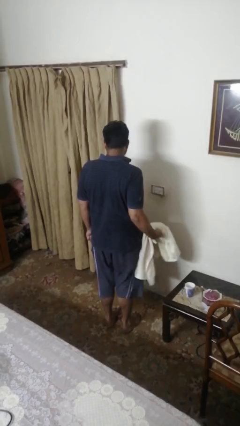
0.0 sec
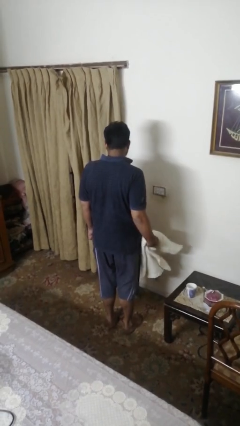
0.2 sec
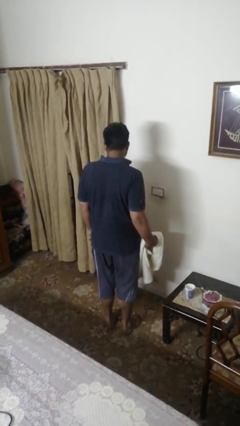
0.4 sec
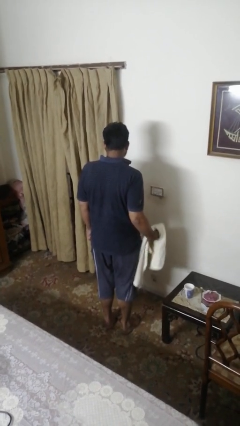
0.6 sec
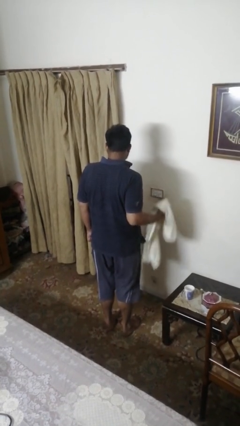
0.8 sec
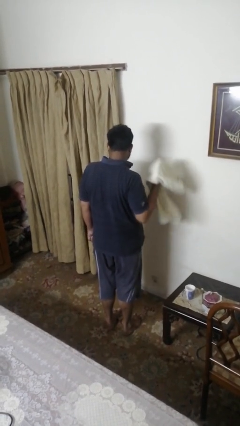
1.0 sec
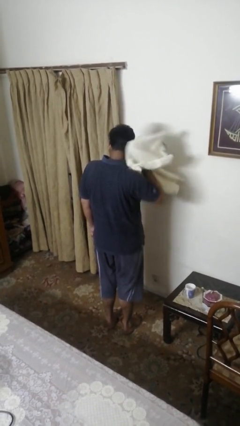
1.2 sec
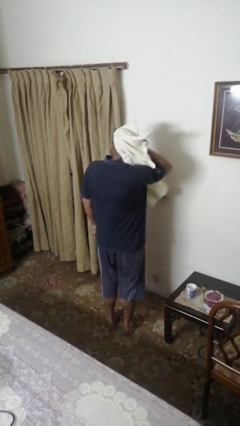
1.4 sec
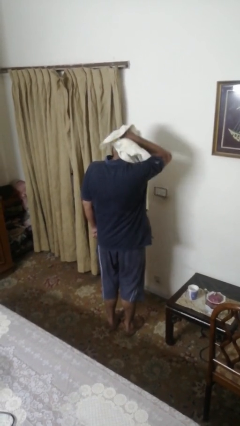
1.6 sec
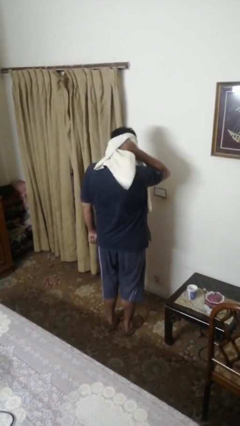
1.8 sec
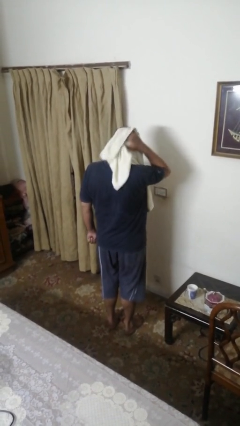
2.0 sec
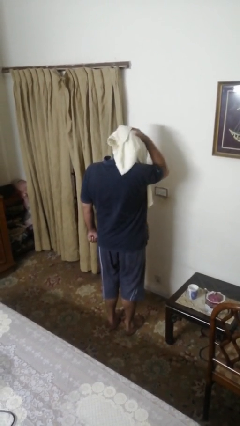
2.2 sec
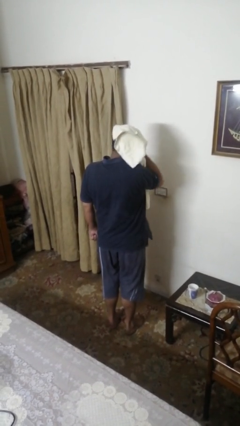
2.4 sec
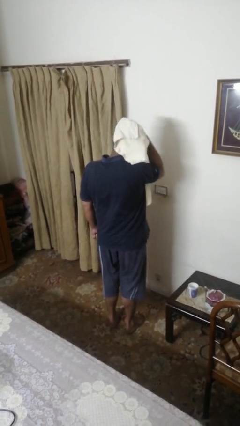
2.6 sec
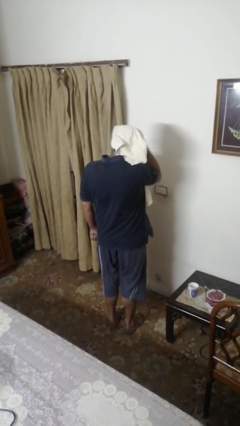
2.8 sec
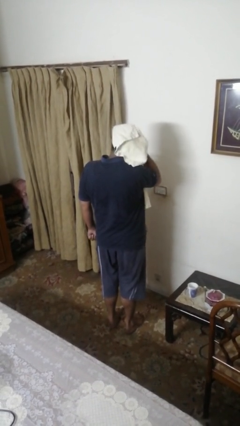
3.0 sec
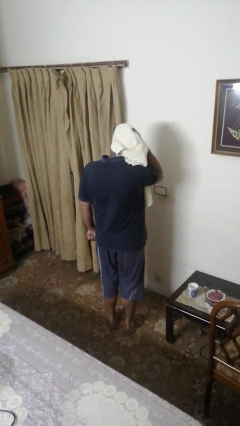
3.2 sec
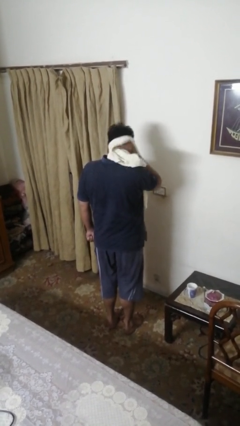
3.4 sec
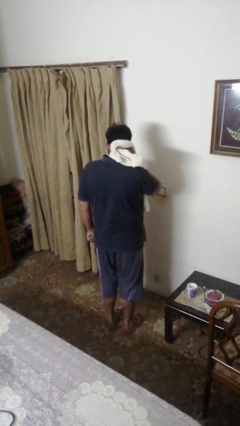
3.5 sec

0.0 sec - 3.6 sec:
person dries hair with towel

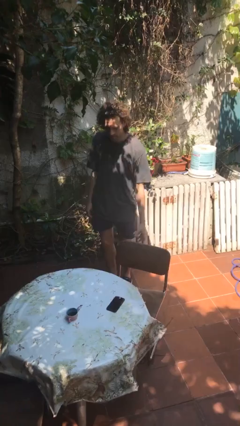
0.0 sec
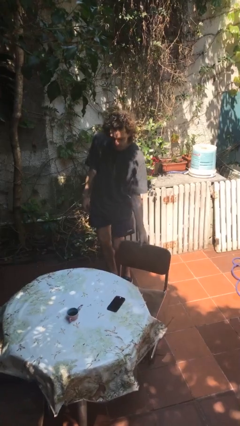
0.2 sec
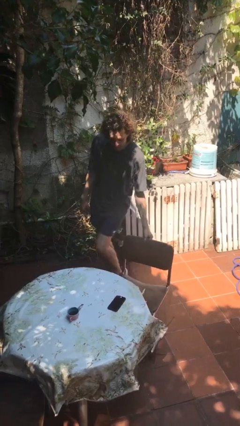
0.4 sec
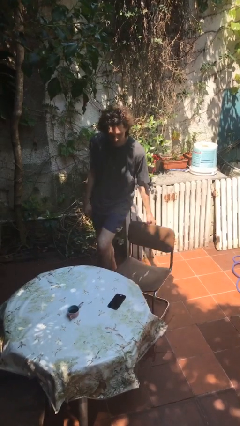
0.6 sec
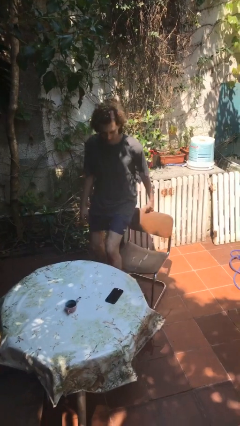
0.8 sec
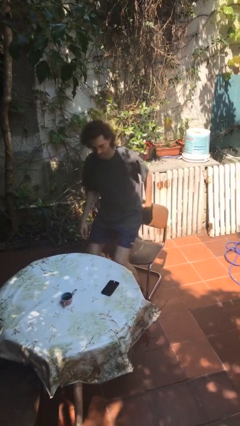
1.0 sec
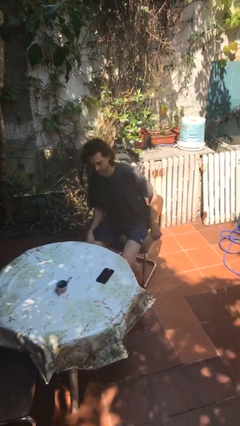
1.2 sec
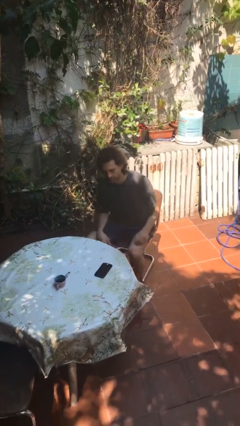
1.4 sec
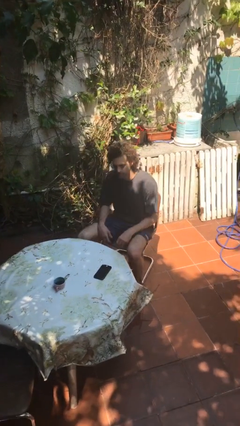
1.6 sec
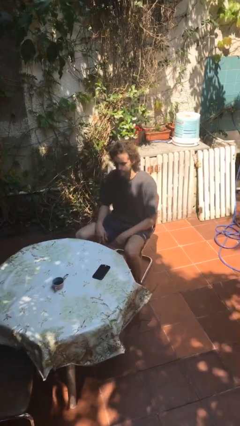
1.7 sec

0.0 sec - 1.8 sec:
person sits down

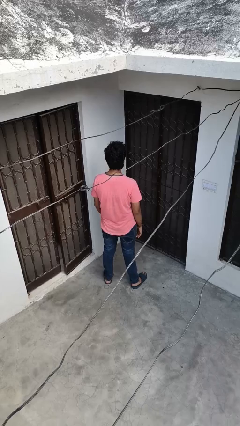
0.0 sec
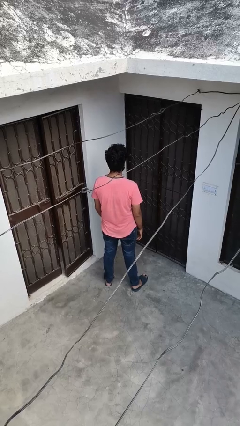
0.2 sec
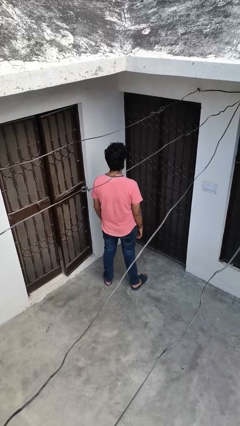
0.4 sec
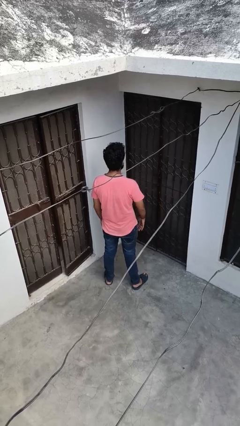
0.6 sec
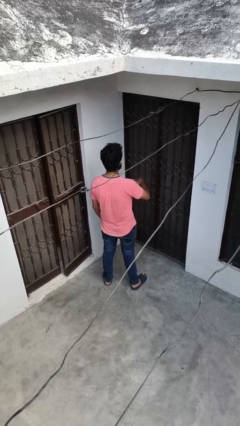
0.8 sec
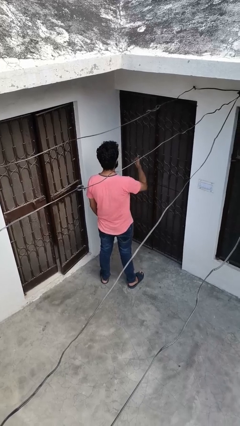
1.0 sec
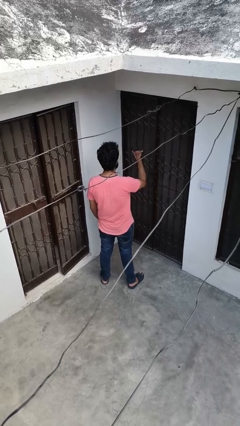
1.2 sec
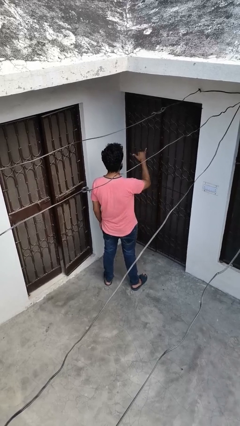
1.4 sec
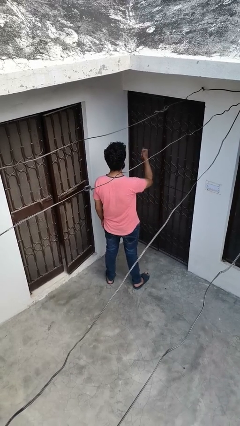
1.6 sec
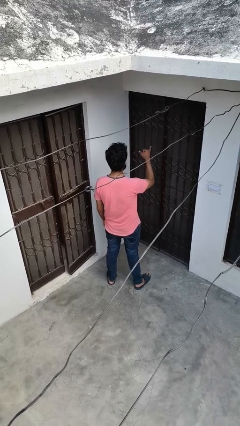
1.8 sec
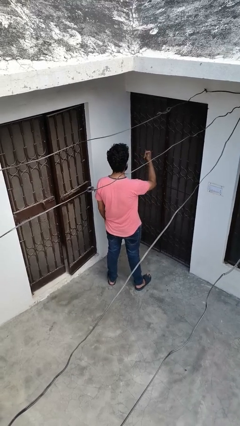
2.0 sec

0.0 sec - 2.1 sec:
person gestures hang loose

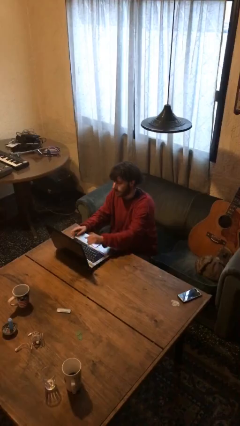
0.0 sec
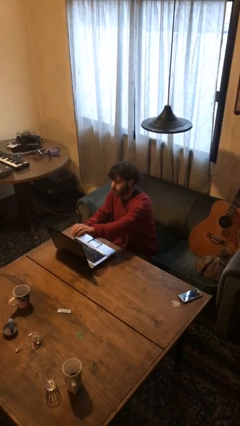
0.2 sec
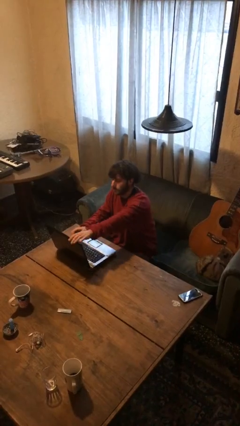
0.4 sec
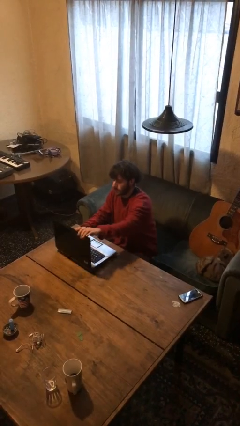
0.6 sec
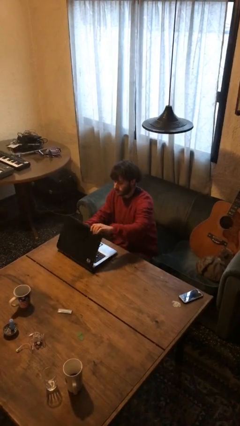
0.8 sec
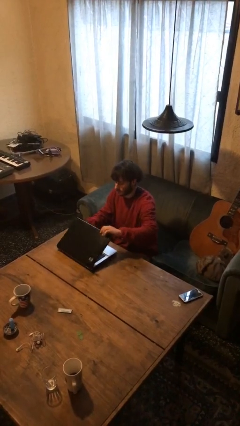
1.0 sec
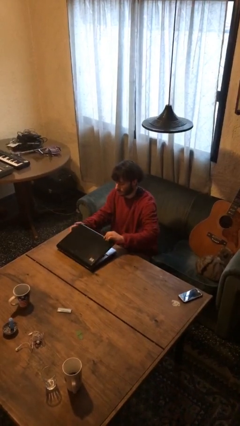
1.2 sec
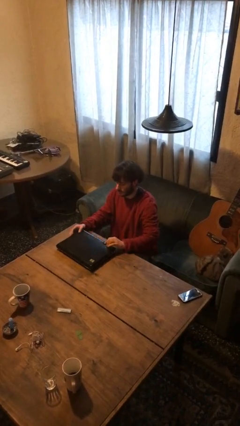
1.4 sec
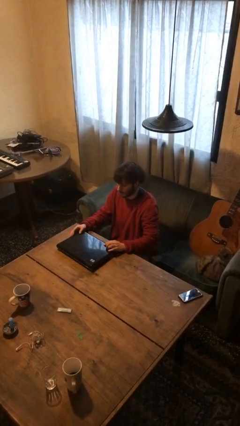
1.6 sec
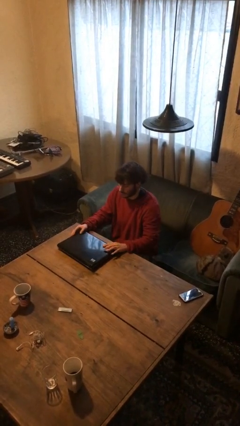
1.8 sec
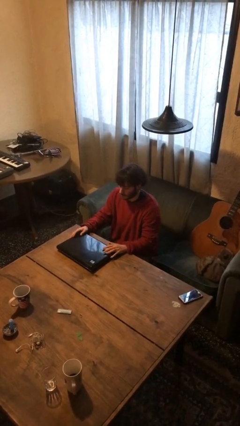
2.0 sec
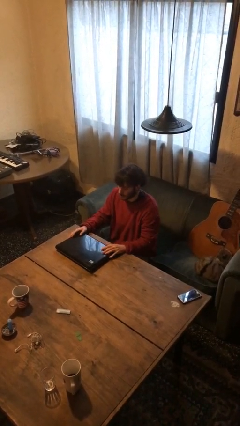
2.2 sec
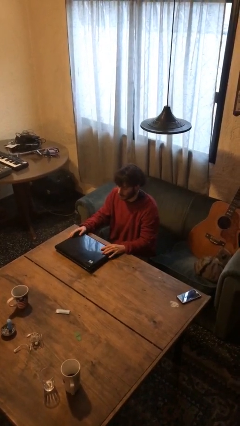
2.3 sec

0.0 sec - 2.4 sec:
person closes laptop

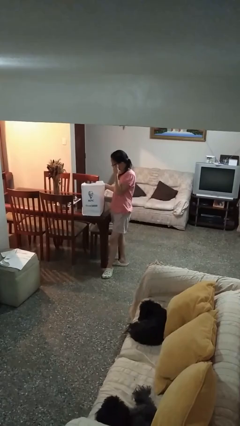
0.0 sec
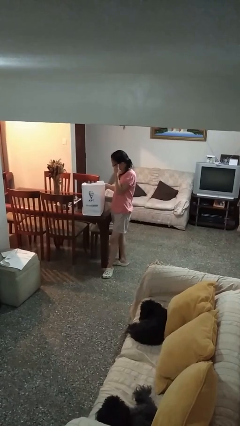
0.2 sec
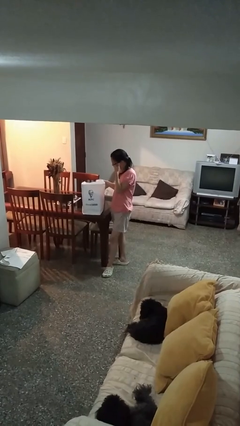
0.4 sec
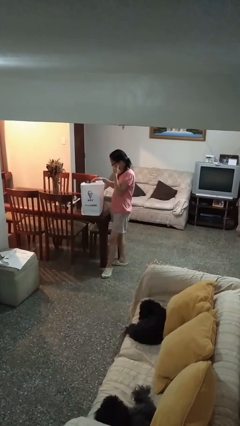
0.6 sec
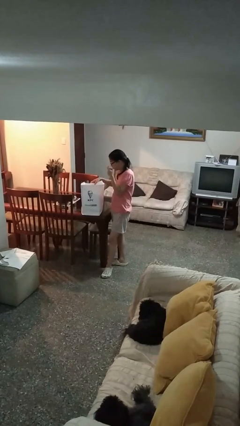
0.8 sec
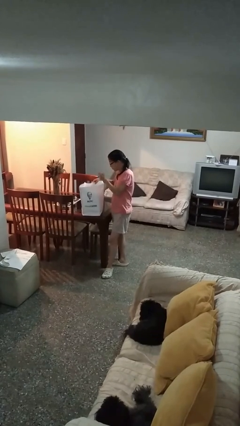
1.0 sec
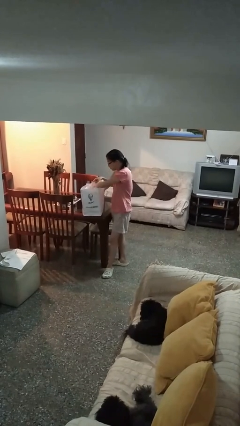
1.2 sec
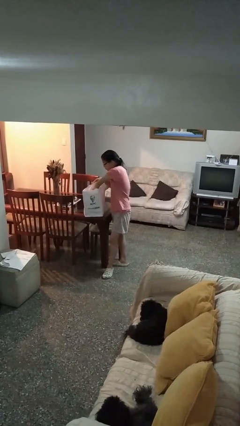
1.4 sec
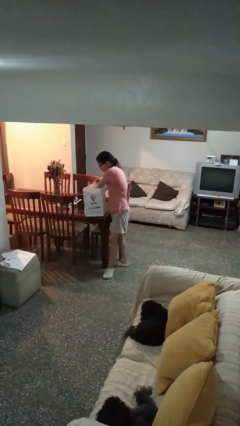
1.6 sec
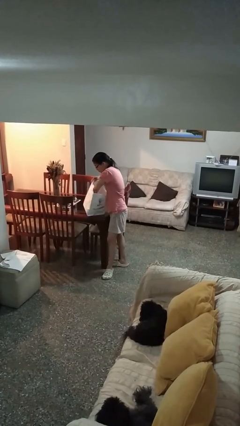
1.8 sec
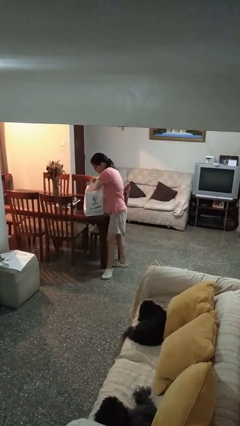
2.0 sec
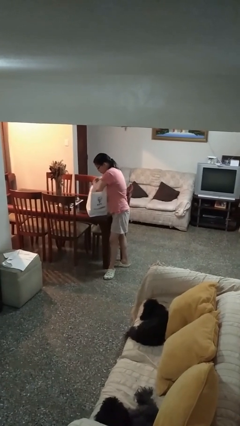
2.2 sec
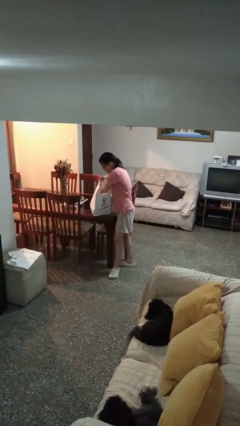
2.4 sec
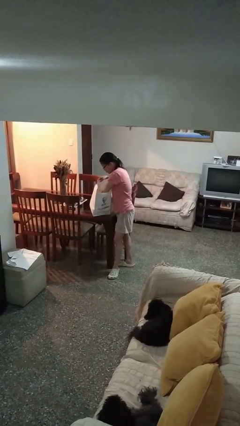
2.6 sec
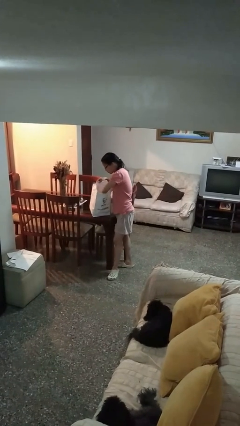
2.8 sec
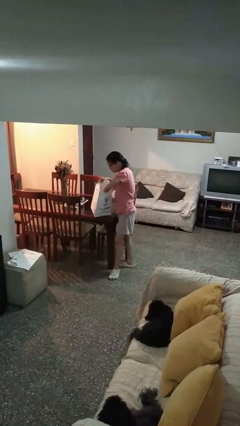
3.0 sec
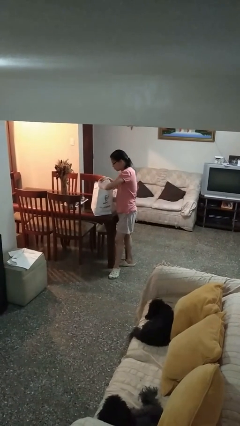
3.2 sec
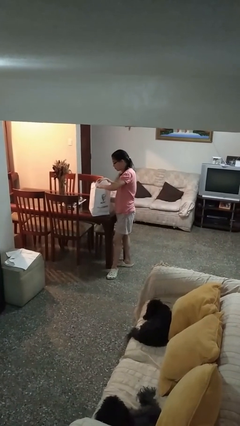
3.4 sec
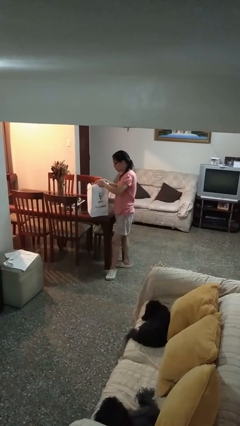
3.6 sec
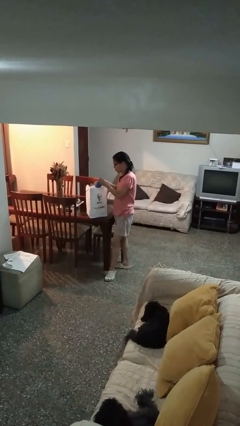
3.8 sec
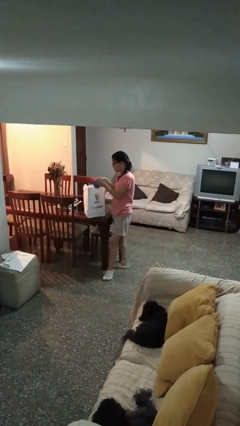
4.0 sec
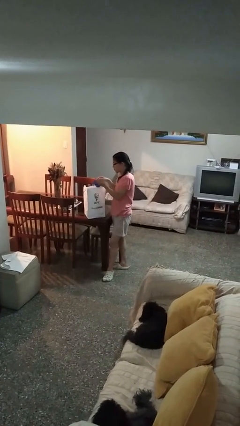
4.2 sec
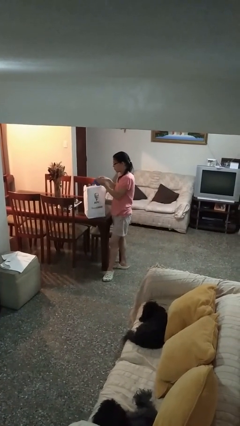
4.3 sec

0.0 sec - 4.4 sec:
person searches in bag

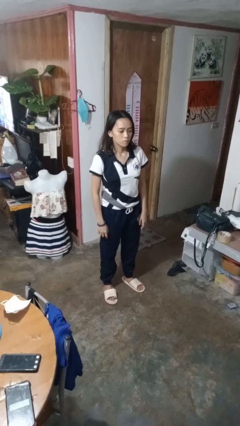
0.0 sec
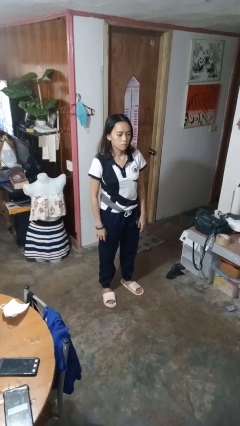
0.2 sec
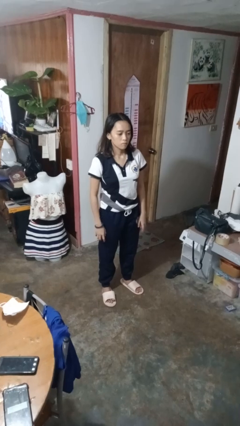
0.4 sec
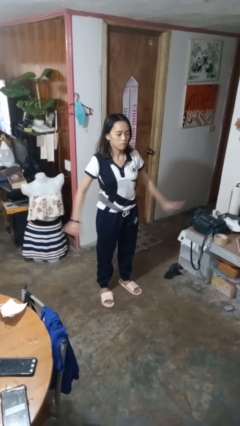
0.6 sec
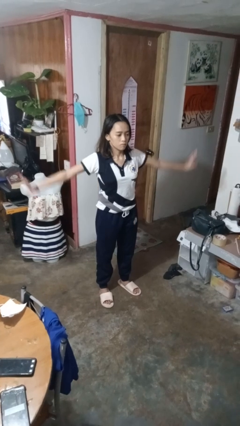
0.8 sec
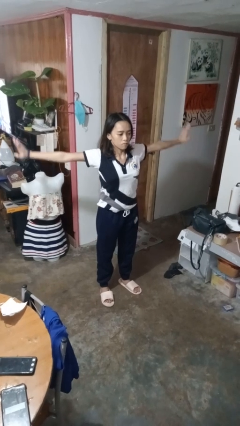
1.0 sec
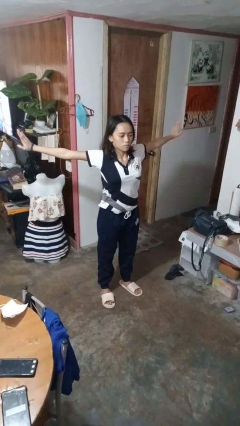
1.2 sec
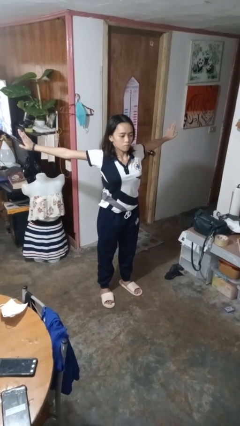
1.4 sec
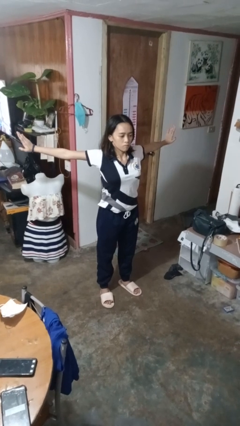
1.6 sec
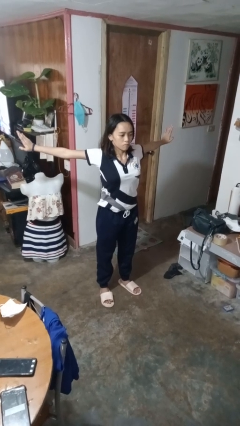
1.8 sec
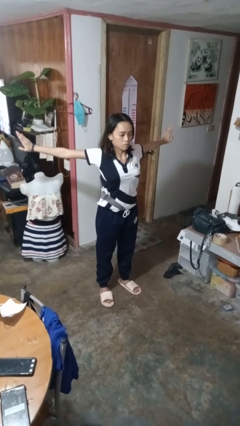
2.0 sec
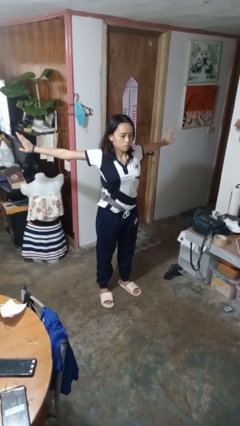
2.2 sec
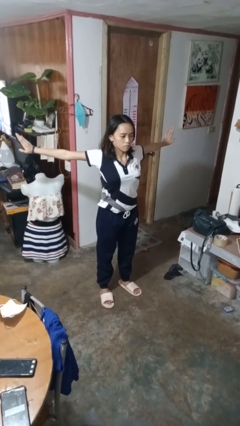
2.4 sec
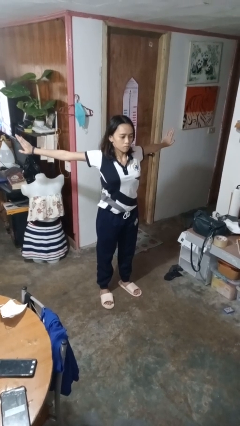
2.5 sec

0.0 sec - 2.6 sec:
person stretches arms to side

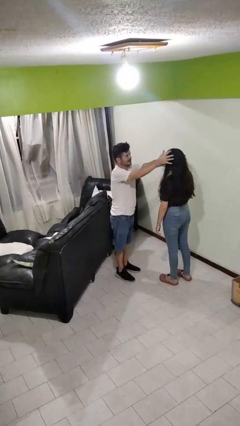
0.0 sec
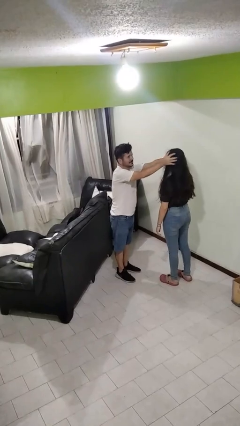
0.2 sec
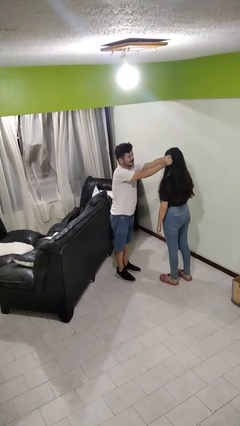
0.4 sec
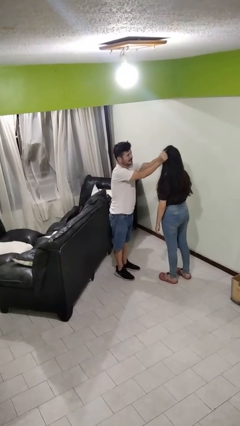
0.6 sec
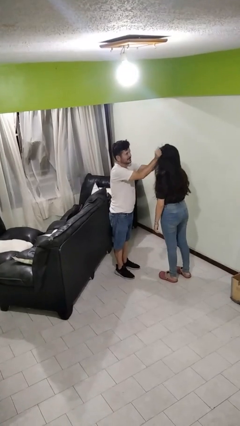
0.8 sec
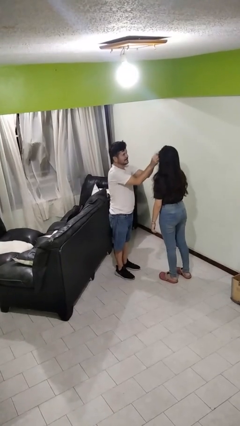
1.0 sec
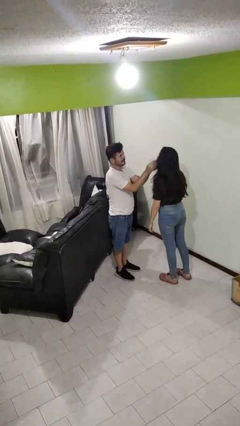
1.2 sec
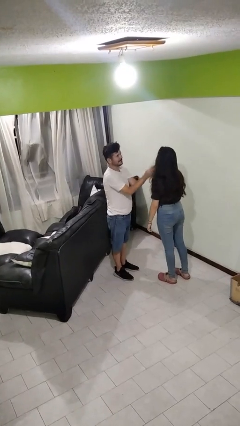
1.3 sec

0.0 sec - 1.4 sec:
person grabs person by hair
